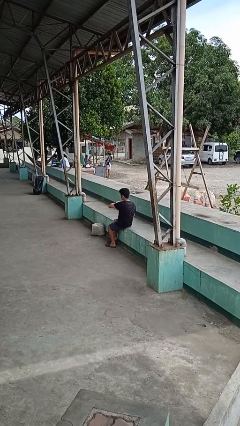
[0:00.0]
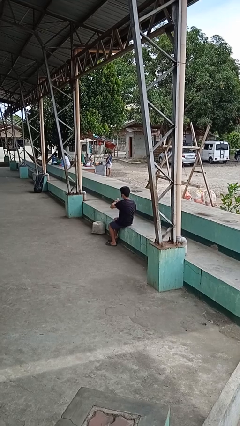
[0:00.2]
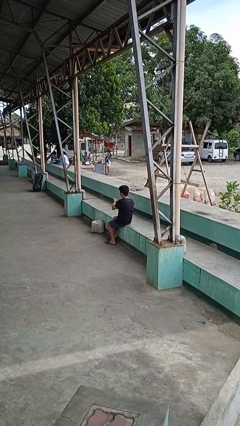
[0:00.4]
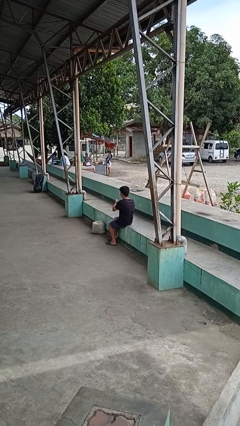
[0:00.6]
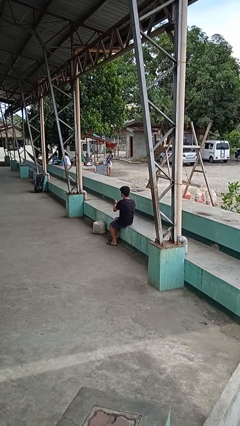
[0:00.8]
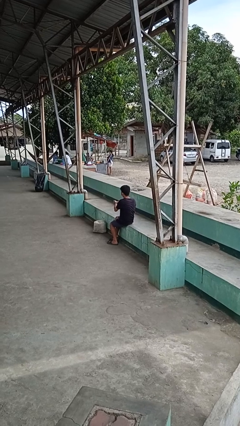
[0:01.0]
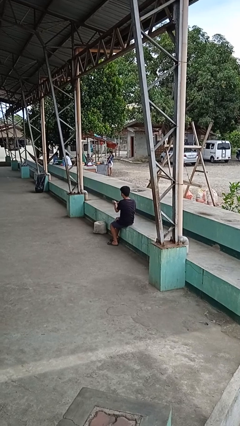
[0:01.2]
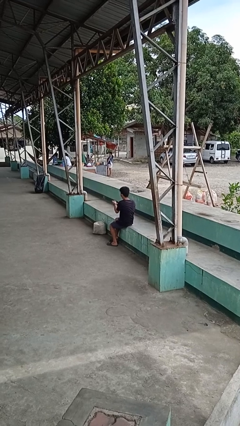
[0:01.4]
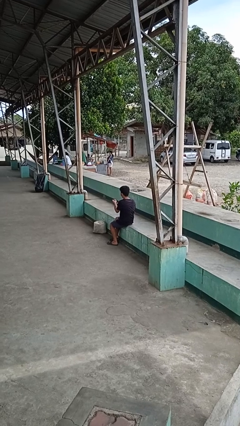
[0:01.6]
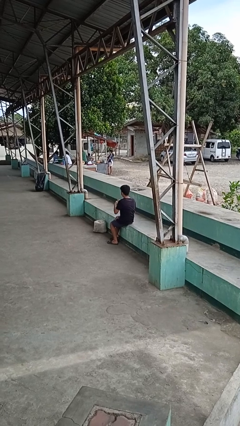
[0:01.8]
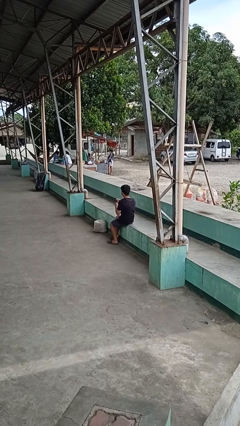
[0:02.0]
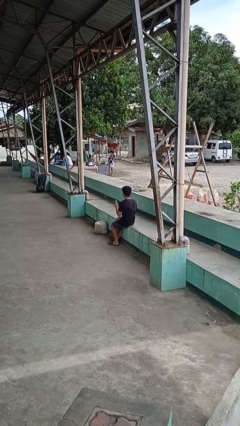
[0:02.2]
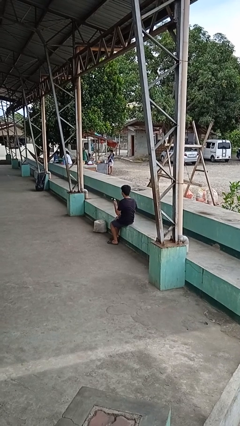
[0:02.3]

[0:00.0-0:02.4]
person takes off wristwatch

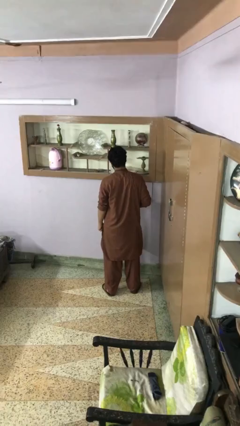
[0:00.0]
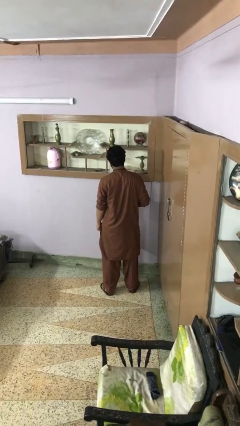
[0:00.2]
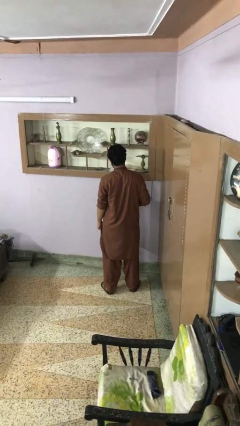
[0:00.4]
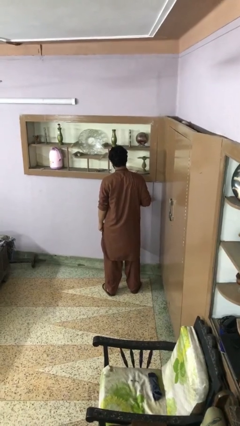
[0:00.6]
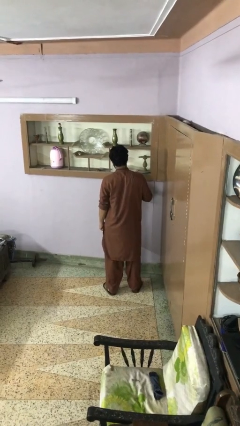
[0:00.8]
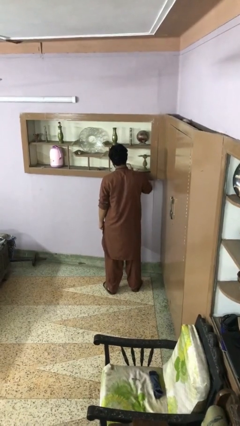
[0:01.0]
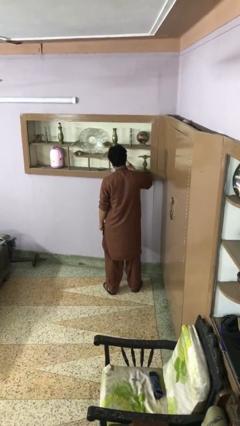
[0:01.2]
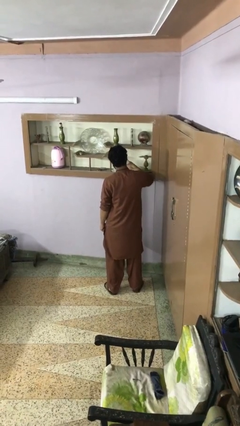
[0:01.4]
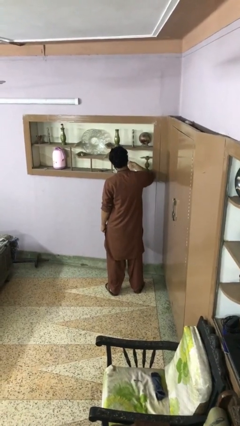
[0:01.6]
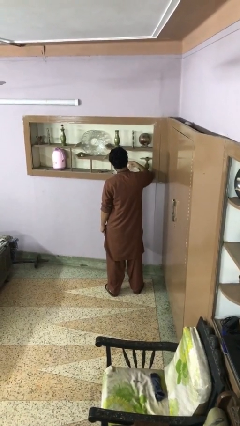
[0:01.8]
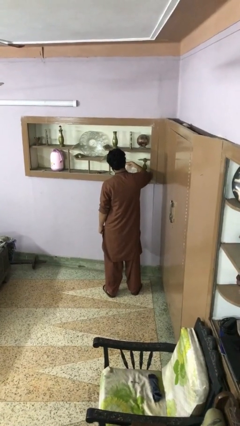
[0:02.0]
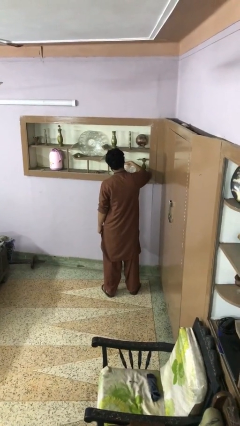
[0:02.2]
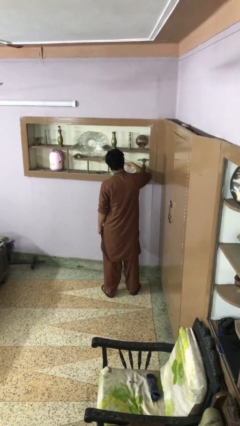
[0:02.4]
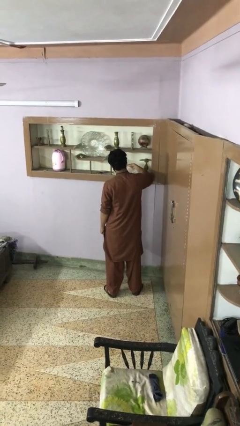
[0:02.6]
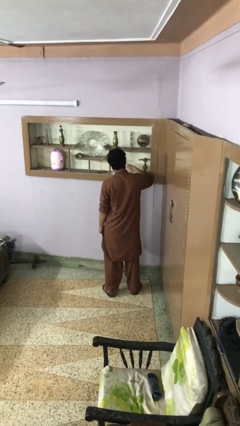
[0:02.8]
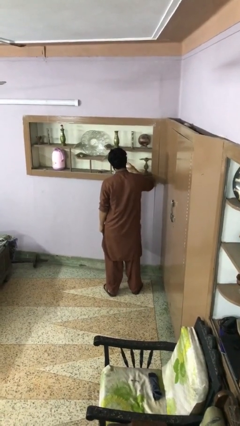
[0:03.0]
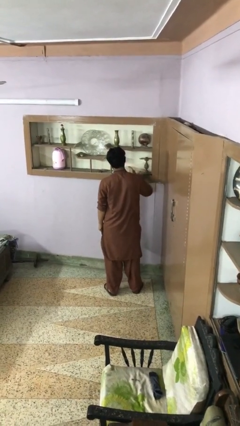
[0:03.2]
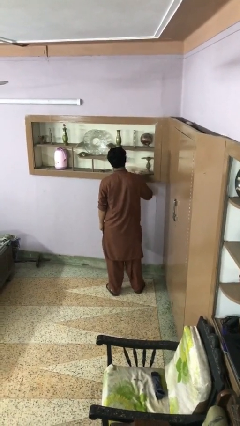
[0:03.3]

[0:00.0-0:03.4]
person pours into bowl

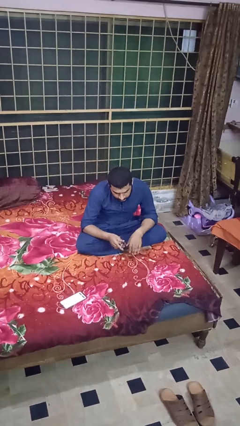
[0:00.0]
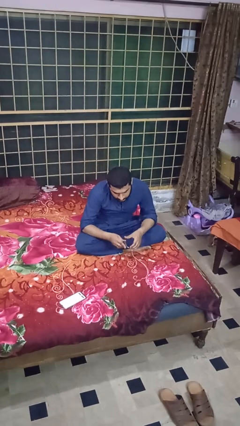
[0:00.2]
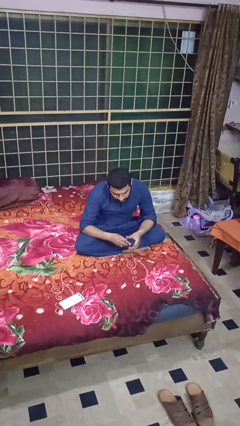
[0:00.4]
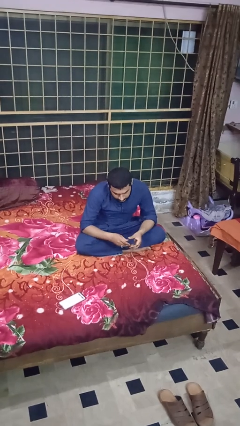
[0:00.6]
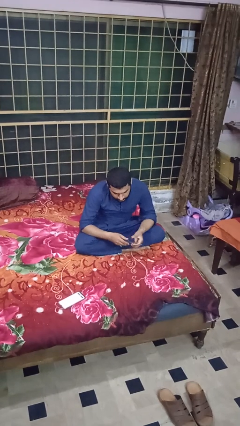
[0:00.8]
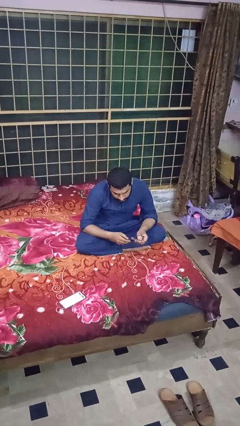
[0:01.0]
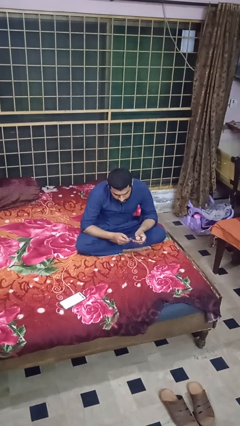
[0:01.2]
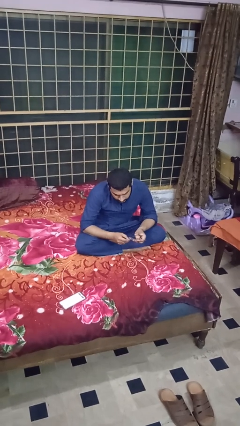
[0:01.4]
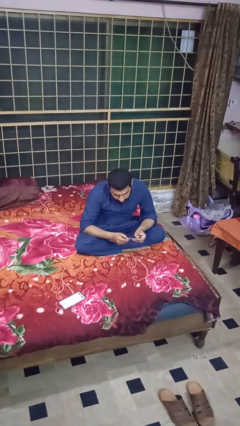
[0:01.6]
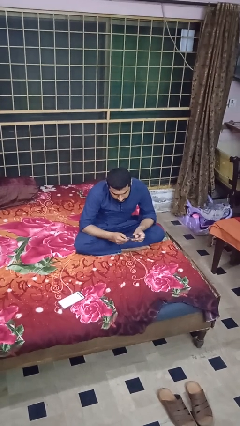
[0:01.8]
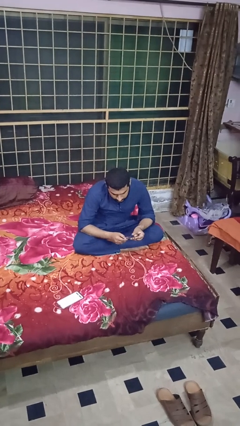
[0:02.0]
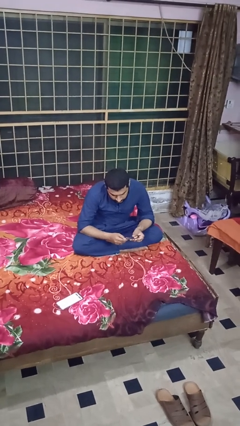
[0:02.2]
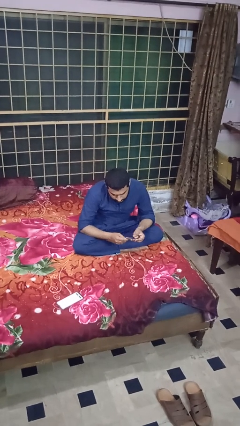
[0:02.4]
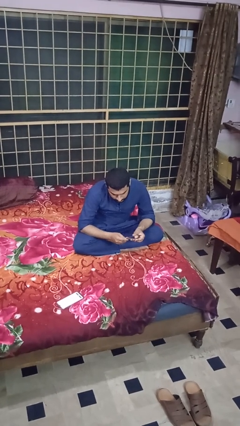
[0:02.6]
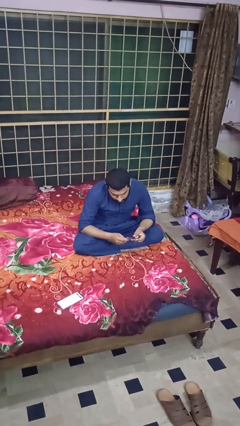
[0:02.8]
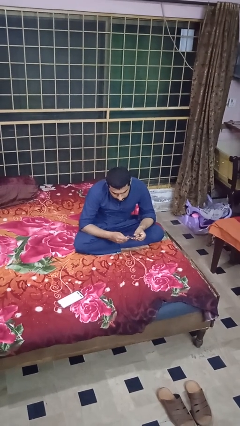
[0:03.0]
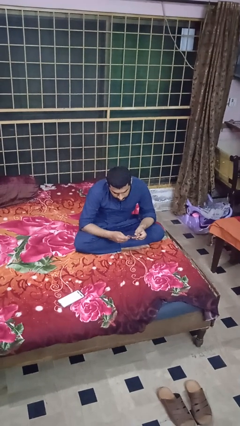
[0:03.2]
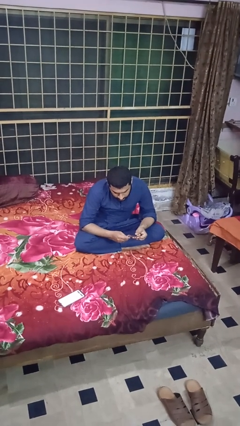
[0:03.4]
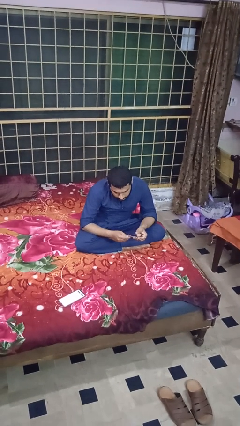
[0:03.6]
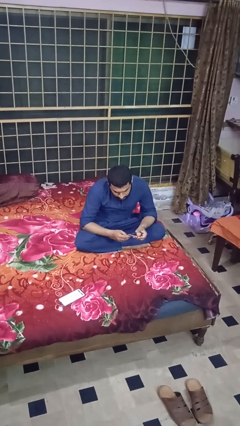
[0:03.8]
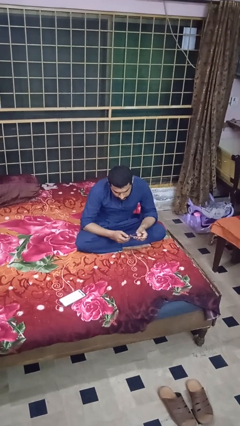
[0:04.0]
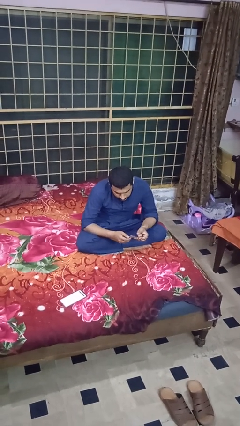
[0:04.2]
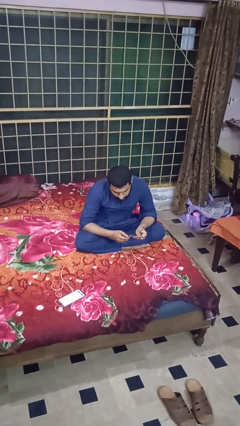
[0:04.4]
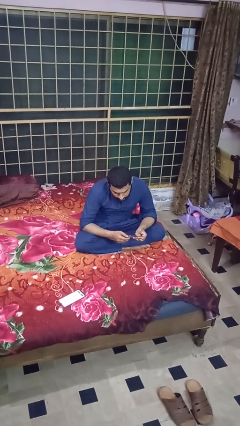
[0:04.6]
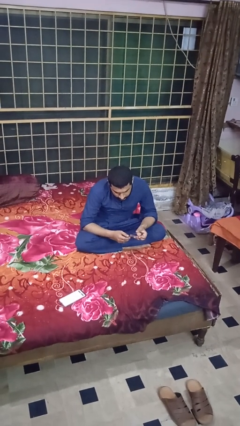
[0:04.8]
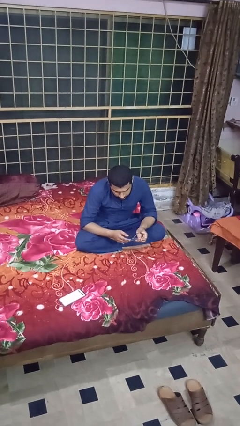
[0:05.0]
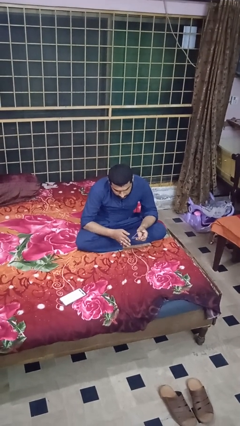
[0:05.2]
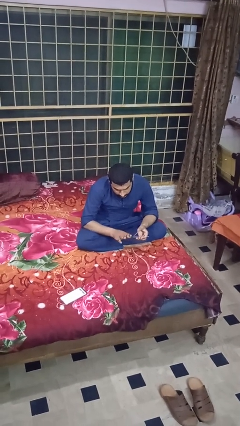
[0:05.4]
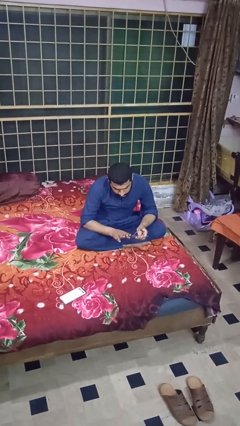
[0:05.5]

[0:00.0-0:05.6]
person clips fingernails

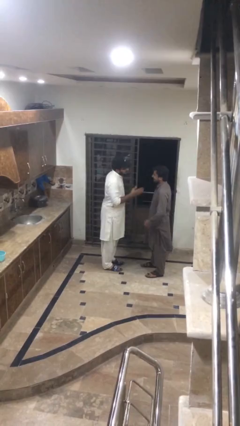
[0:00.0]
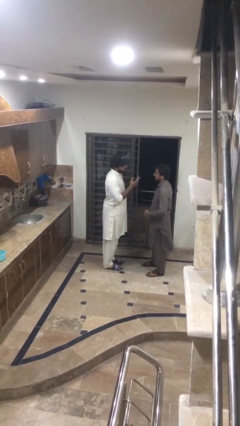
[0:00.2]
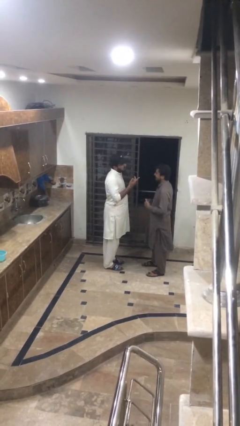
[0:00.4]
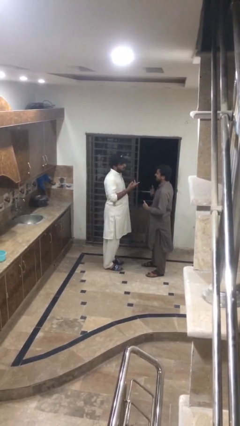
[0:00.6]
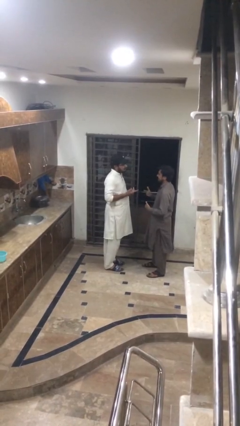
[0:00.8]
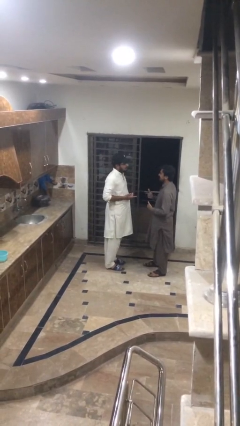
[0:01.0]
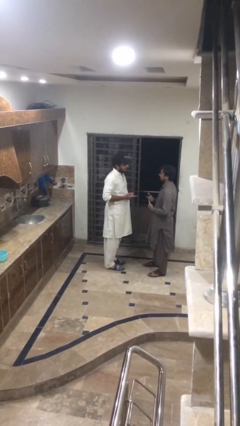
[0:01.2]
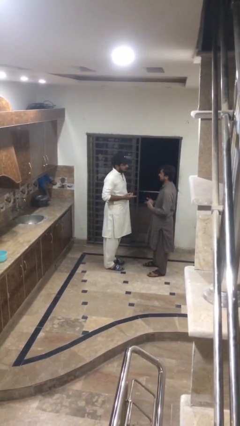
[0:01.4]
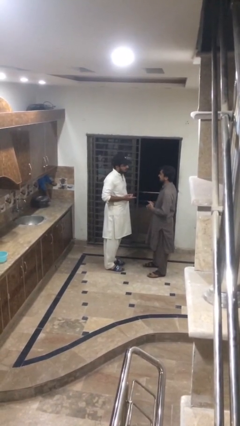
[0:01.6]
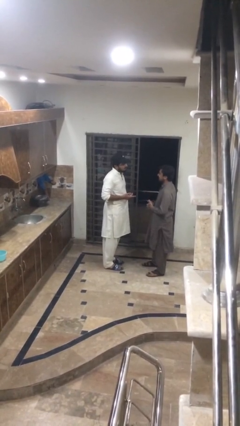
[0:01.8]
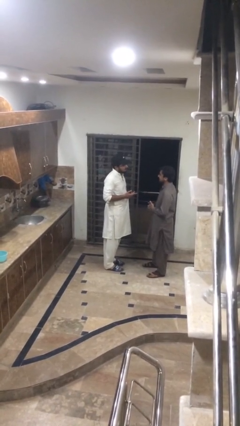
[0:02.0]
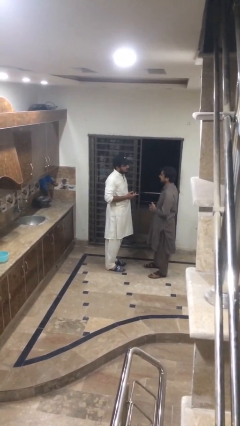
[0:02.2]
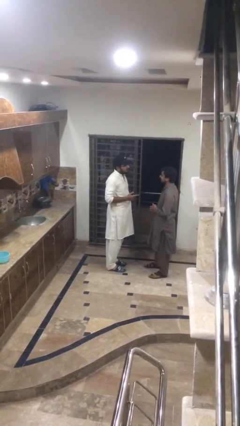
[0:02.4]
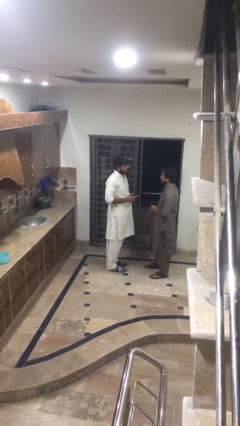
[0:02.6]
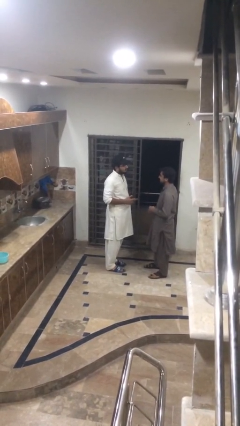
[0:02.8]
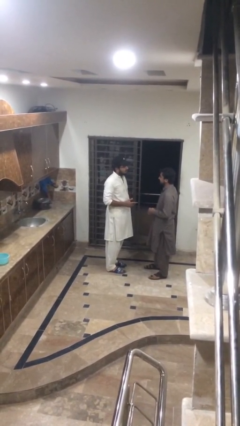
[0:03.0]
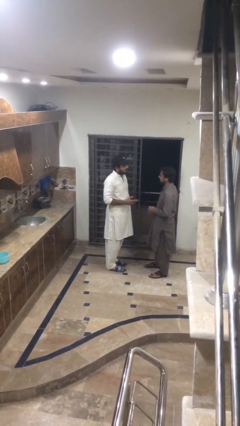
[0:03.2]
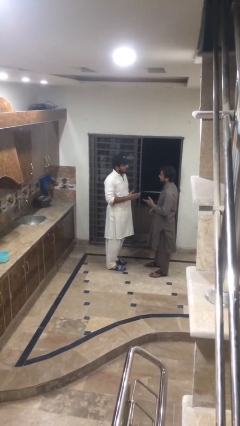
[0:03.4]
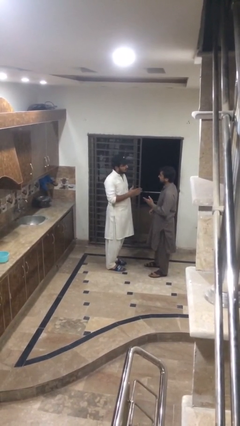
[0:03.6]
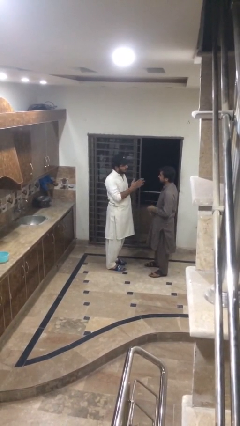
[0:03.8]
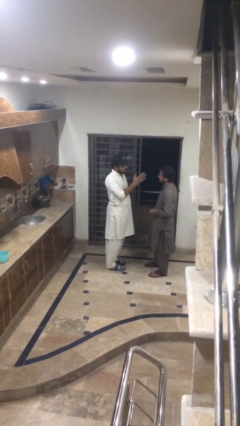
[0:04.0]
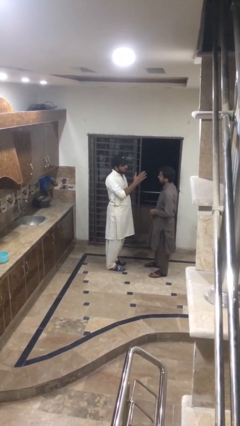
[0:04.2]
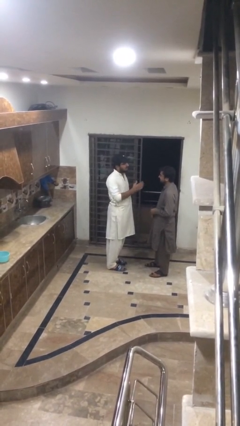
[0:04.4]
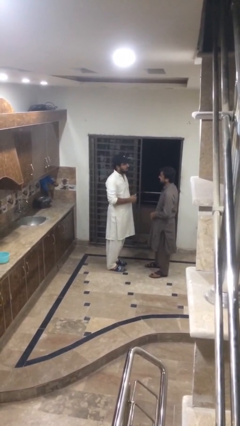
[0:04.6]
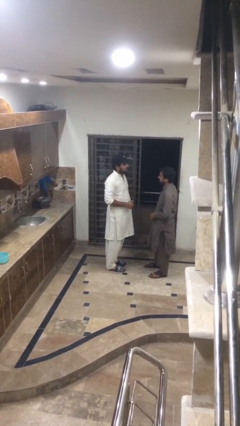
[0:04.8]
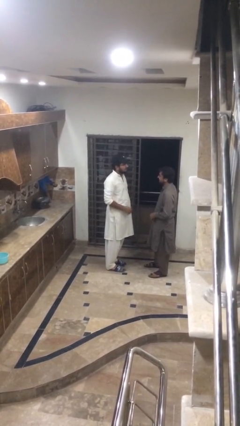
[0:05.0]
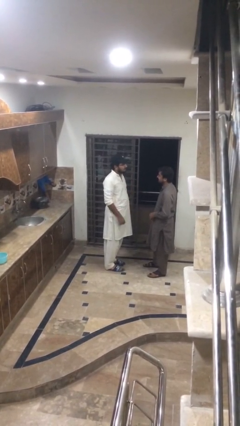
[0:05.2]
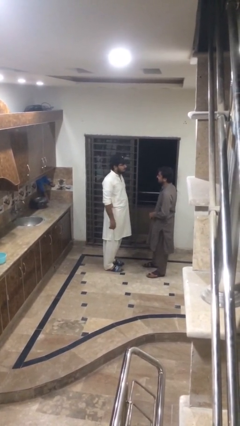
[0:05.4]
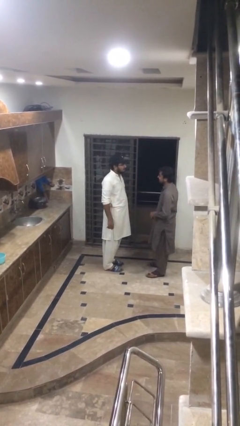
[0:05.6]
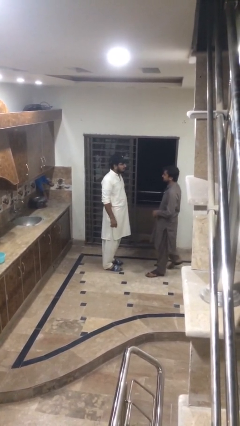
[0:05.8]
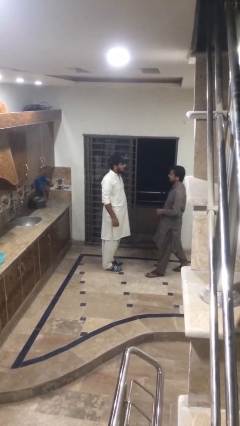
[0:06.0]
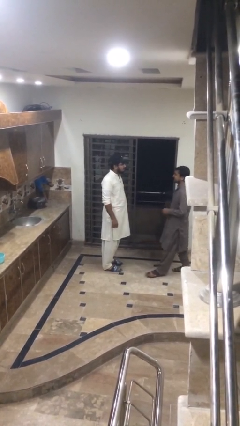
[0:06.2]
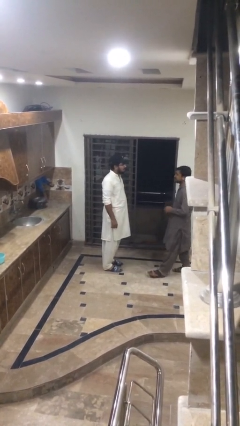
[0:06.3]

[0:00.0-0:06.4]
person talks to person
